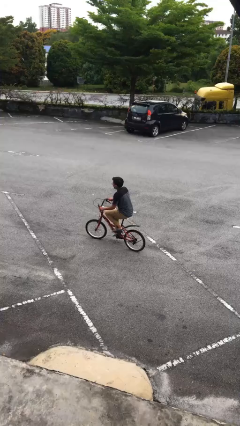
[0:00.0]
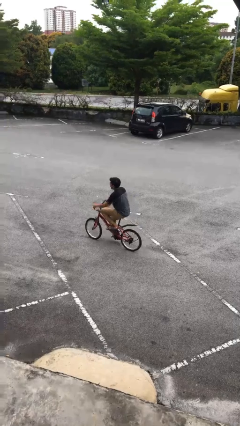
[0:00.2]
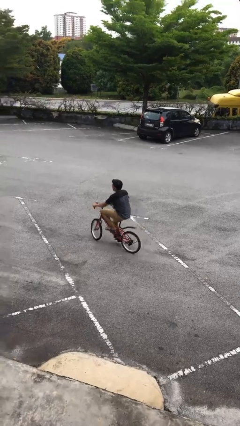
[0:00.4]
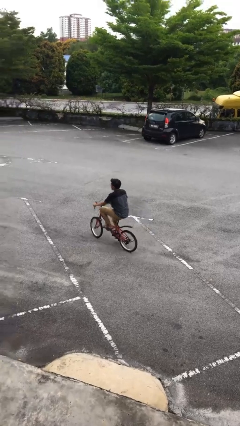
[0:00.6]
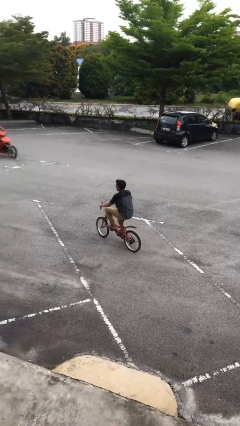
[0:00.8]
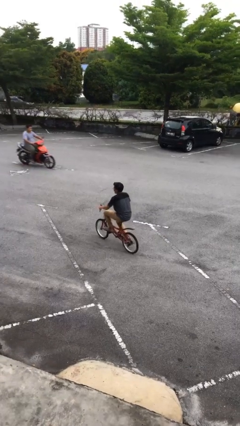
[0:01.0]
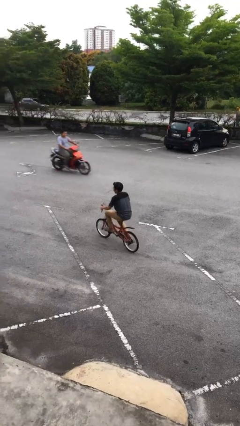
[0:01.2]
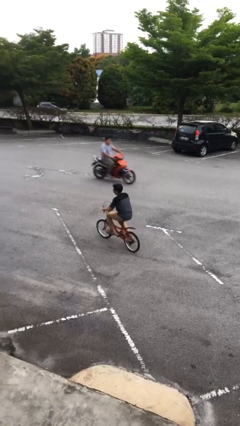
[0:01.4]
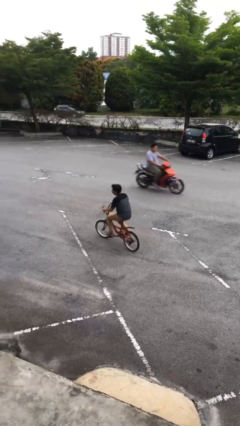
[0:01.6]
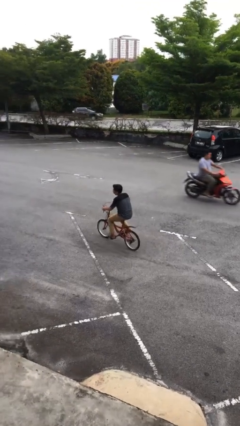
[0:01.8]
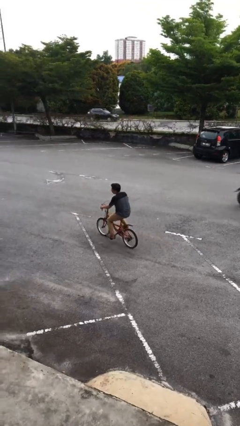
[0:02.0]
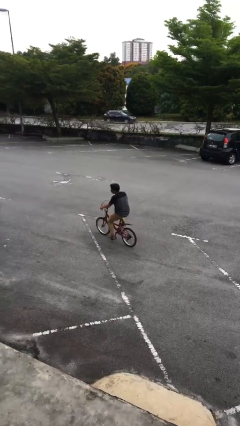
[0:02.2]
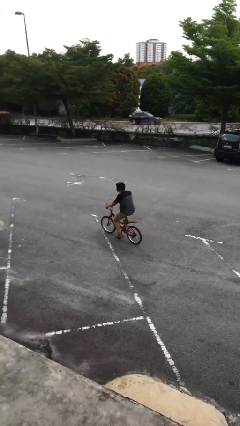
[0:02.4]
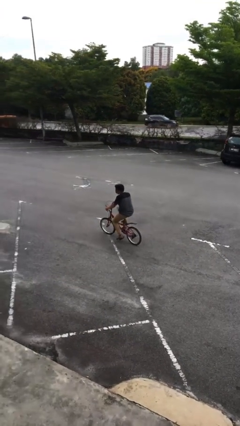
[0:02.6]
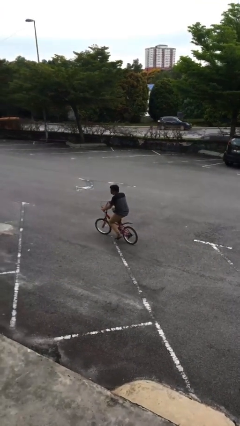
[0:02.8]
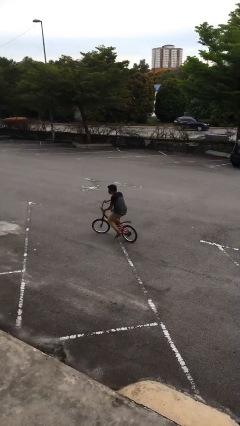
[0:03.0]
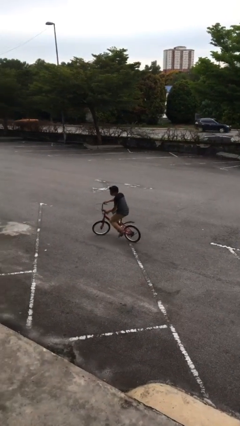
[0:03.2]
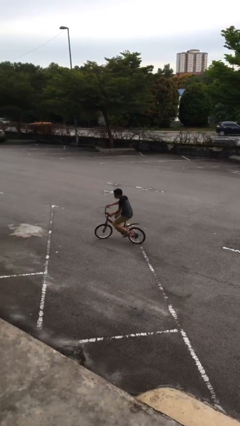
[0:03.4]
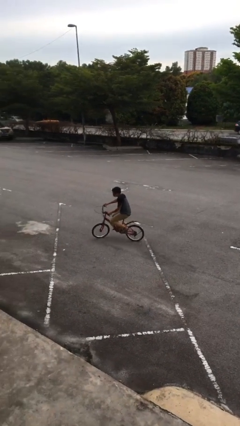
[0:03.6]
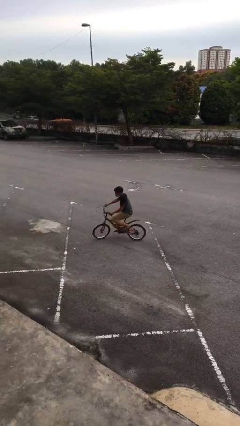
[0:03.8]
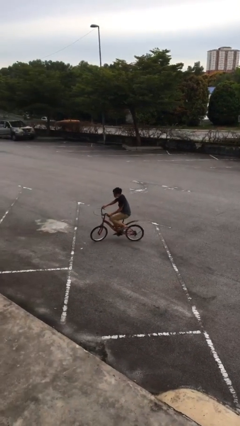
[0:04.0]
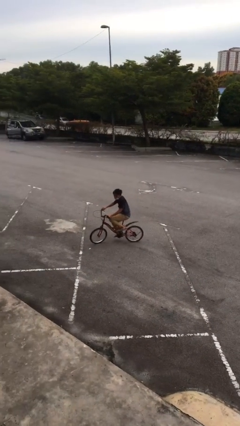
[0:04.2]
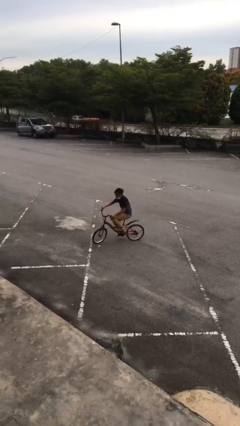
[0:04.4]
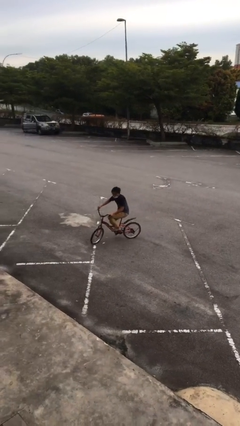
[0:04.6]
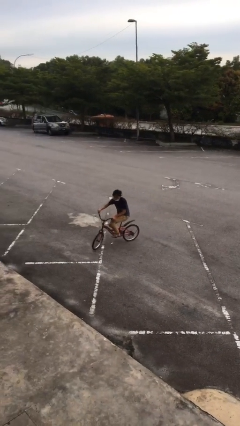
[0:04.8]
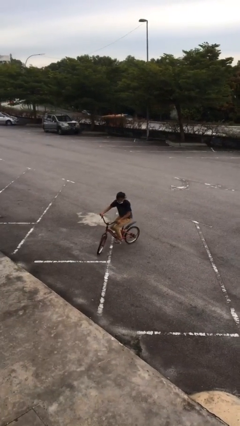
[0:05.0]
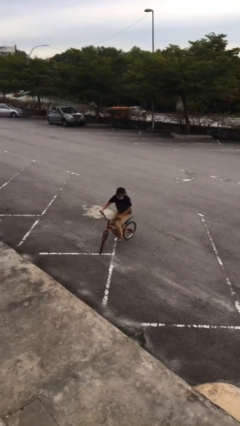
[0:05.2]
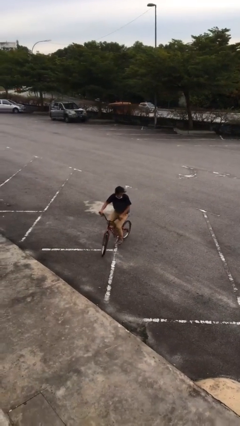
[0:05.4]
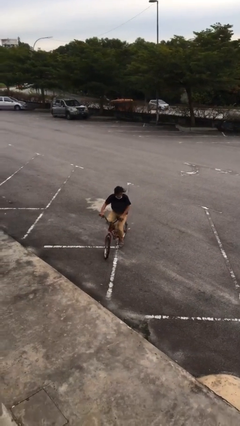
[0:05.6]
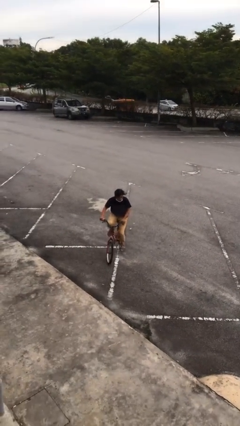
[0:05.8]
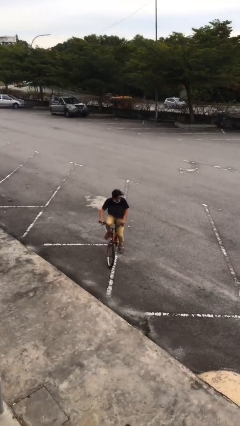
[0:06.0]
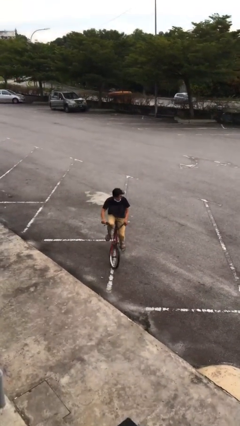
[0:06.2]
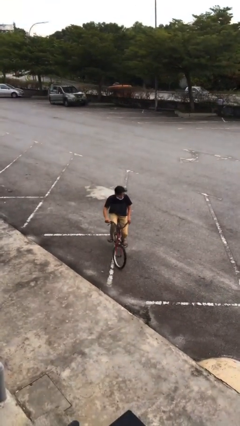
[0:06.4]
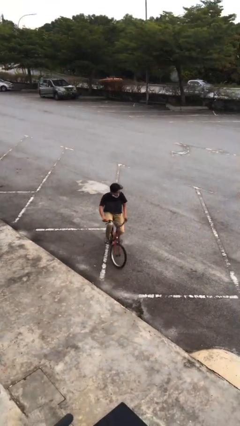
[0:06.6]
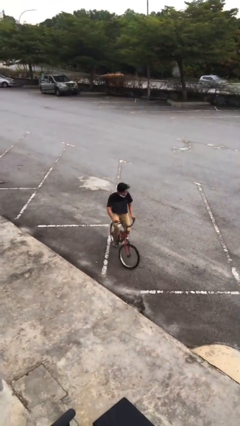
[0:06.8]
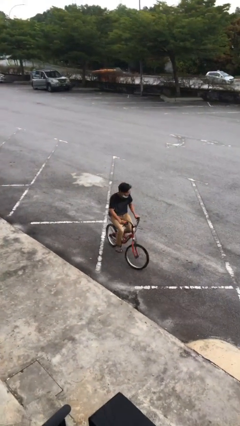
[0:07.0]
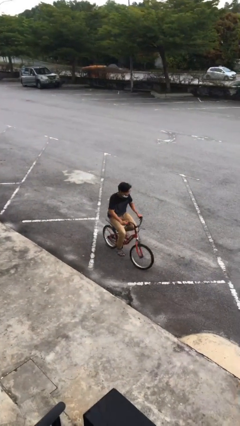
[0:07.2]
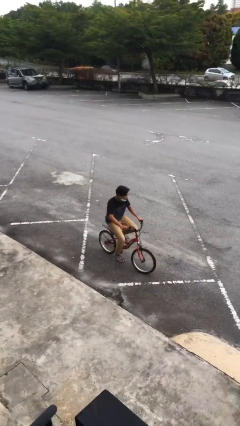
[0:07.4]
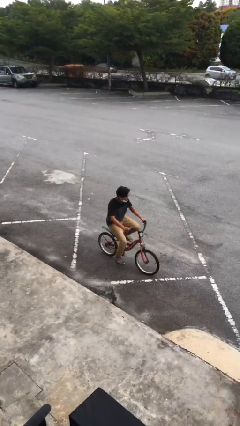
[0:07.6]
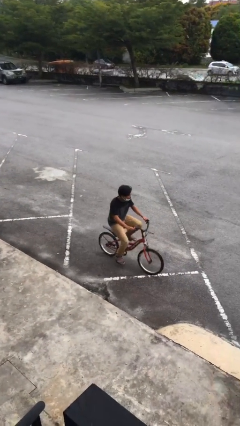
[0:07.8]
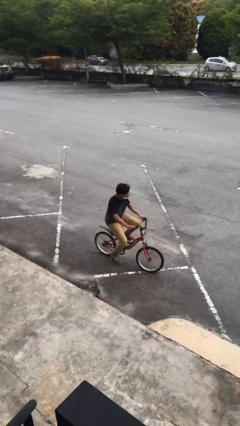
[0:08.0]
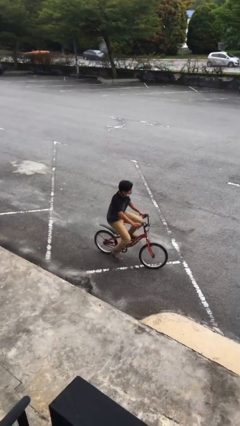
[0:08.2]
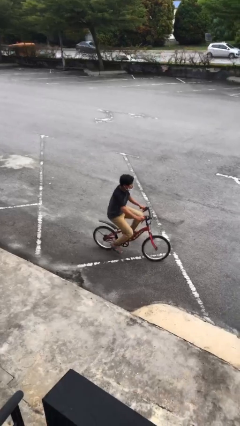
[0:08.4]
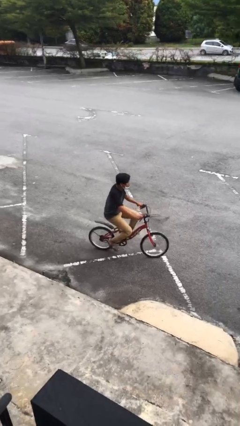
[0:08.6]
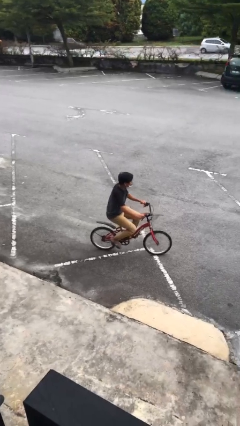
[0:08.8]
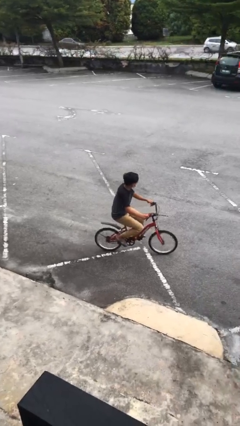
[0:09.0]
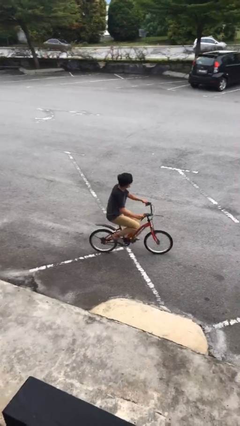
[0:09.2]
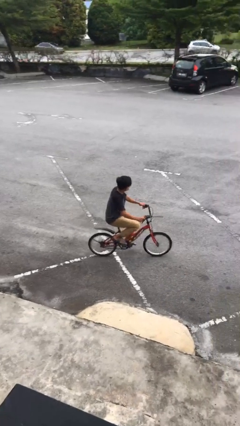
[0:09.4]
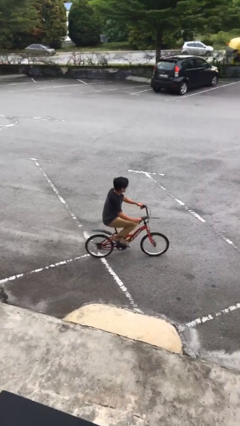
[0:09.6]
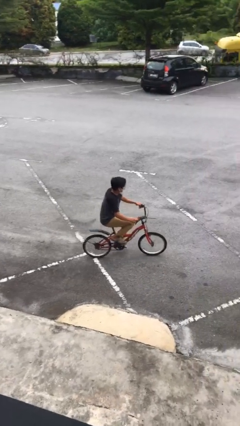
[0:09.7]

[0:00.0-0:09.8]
person rides bicycle

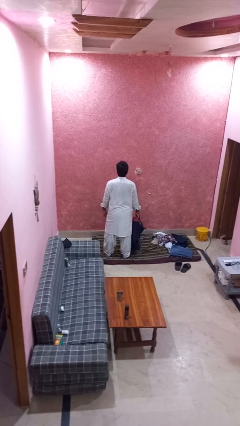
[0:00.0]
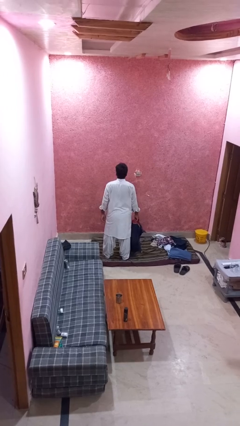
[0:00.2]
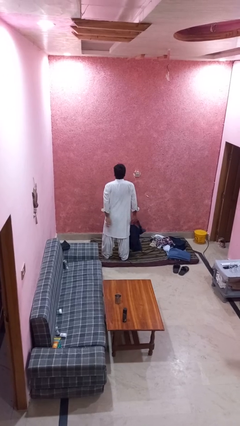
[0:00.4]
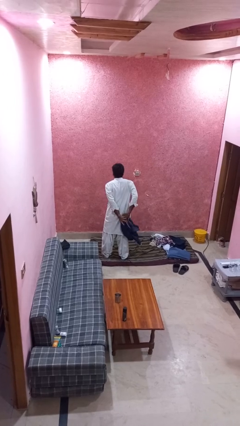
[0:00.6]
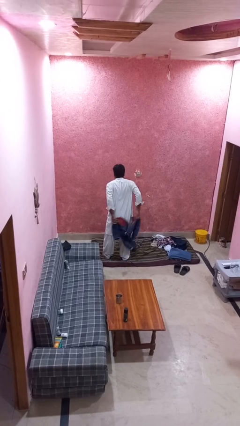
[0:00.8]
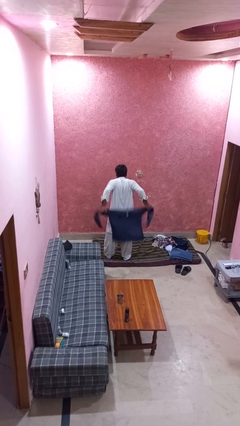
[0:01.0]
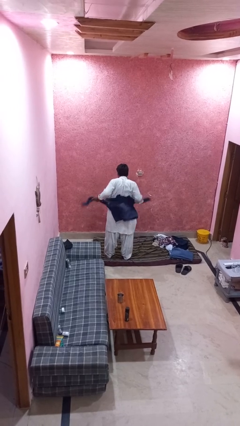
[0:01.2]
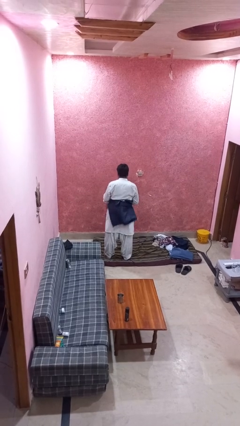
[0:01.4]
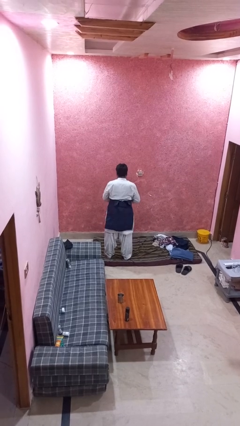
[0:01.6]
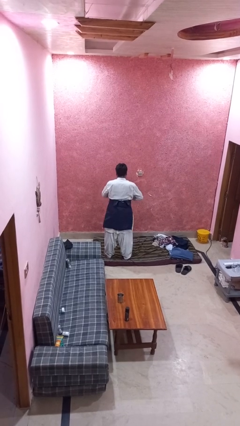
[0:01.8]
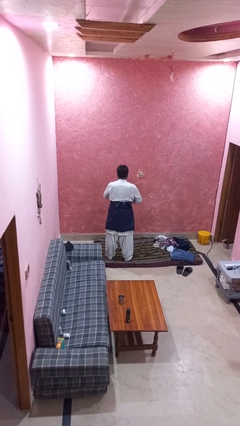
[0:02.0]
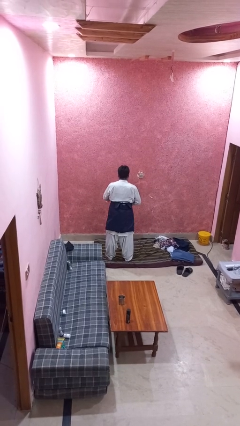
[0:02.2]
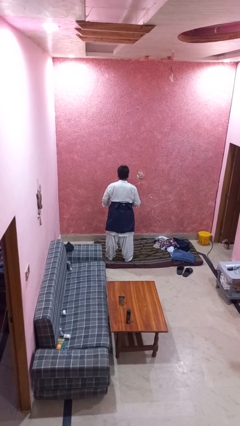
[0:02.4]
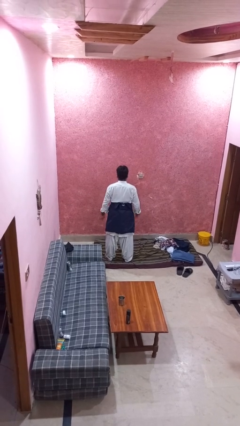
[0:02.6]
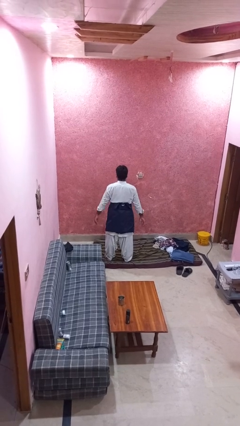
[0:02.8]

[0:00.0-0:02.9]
person ties jacket around waist

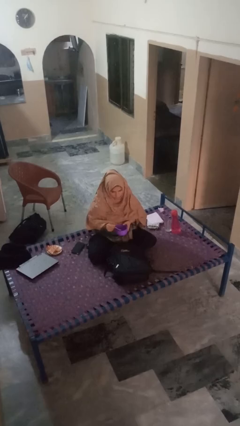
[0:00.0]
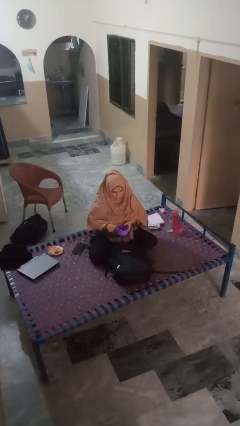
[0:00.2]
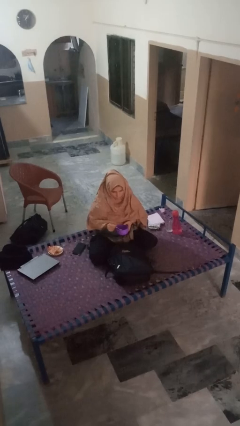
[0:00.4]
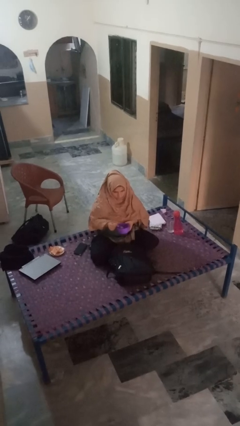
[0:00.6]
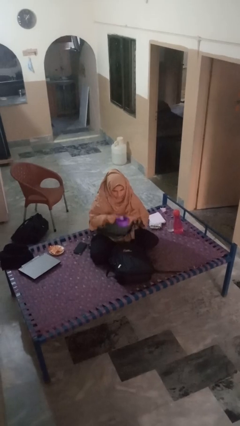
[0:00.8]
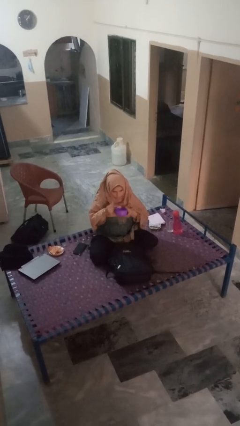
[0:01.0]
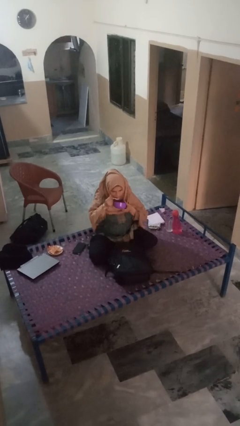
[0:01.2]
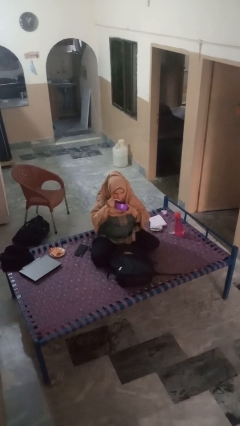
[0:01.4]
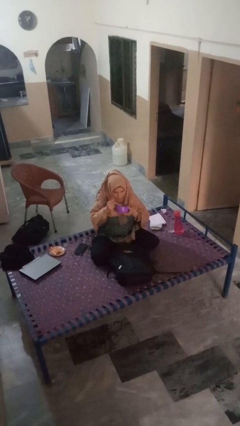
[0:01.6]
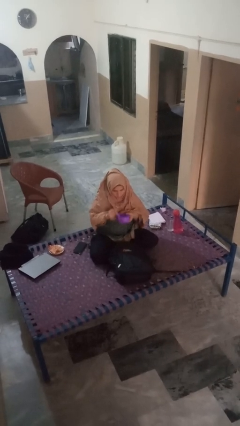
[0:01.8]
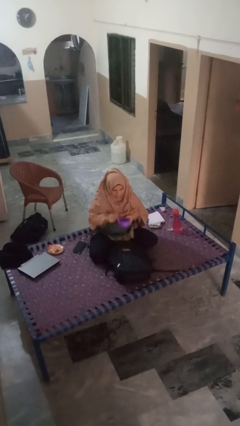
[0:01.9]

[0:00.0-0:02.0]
person eats snack from bag

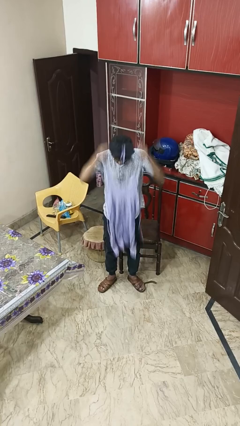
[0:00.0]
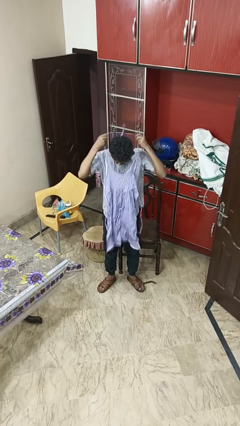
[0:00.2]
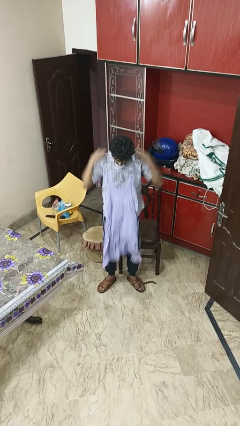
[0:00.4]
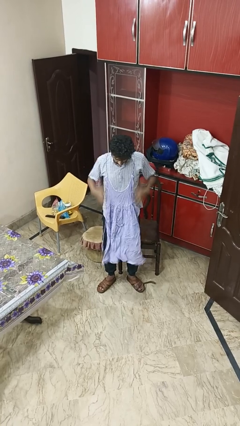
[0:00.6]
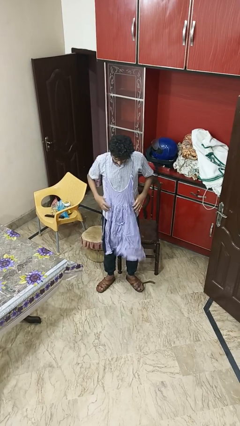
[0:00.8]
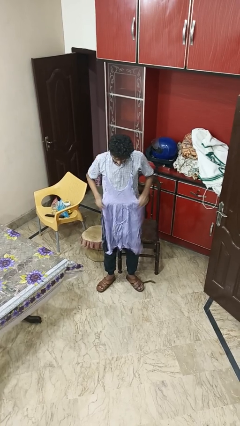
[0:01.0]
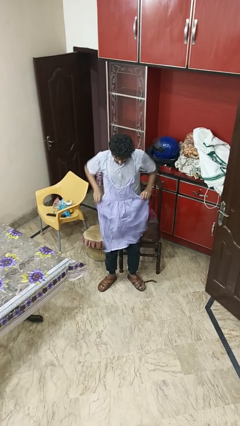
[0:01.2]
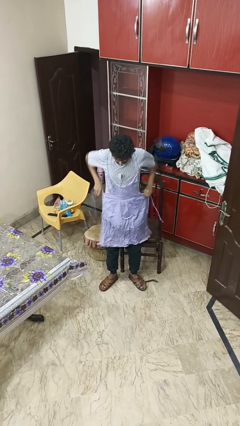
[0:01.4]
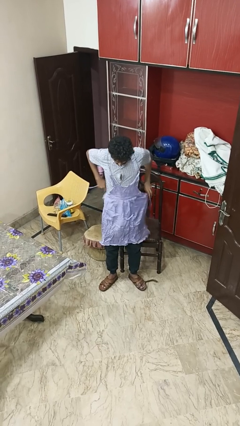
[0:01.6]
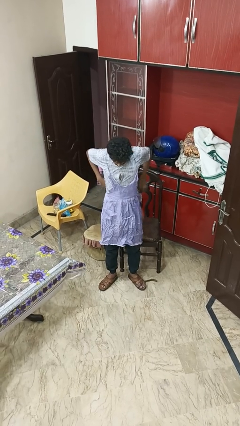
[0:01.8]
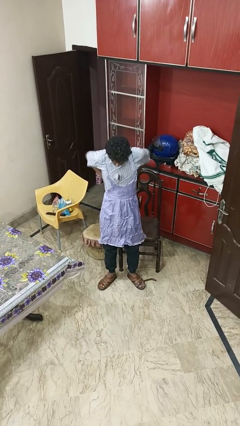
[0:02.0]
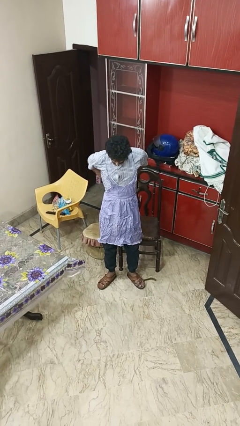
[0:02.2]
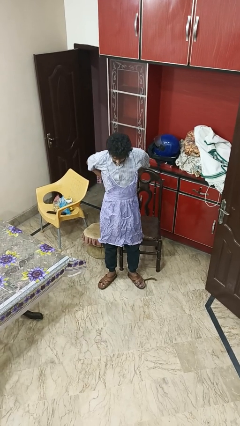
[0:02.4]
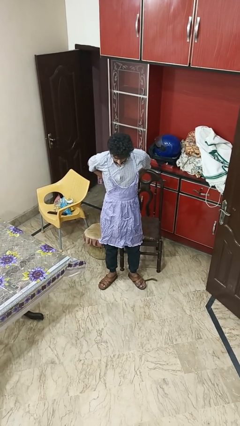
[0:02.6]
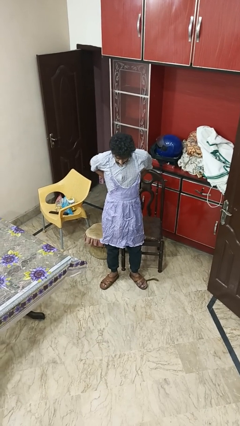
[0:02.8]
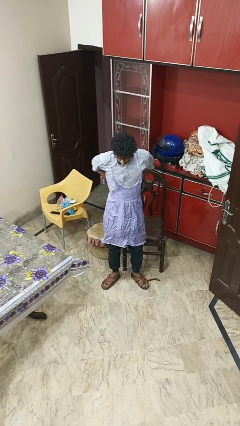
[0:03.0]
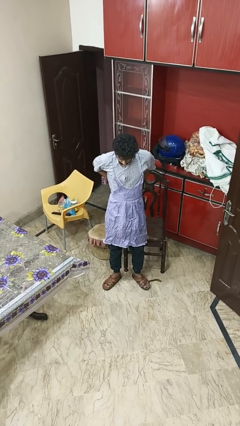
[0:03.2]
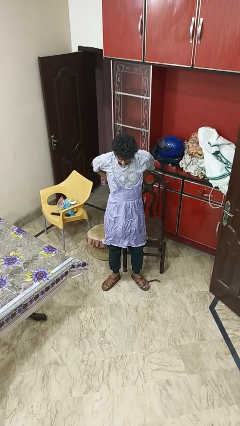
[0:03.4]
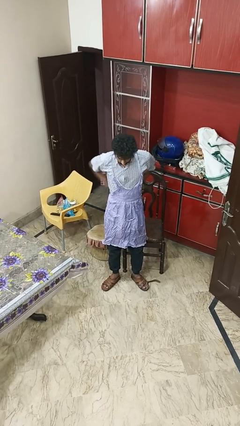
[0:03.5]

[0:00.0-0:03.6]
person puts on apron
